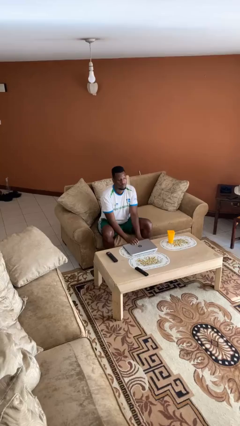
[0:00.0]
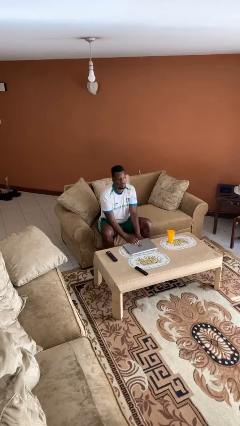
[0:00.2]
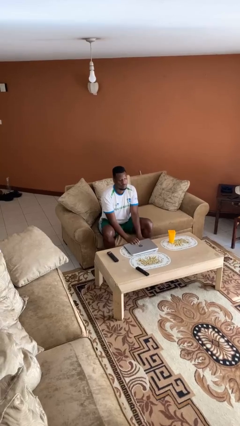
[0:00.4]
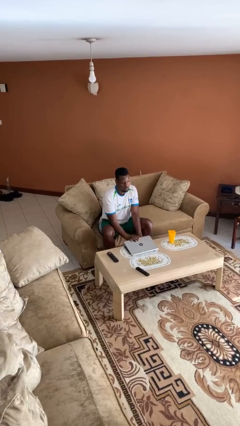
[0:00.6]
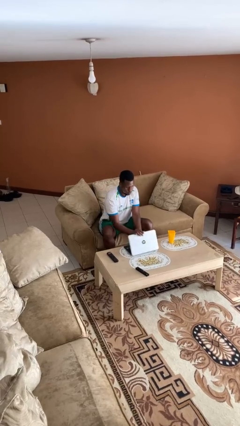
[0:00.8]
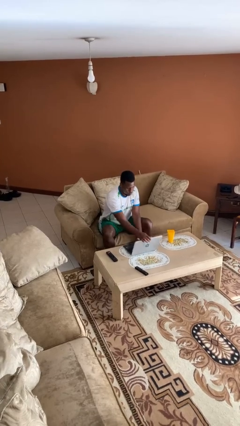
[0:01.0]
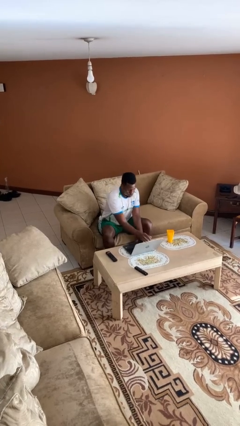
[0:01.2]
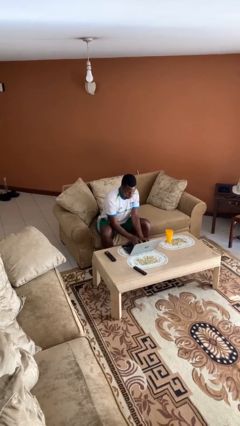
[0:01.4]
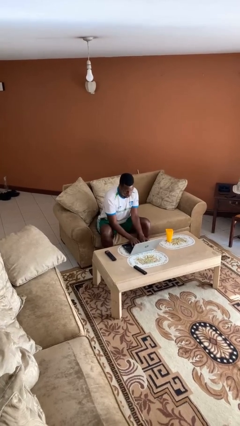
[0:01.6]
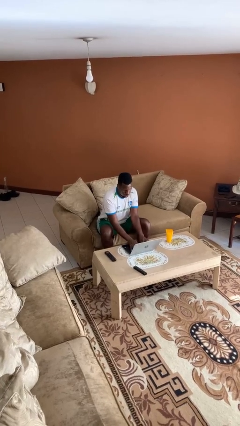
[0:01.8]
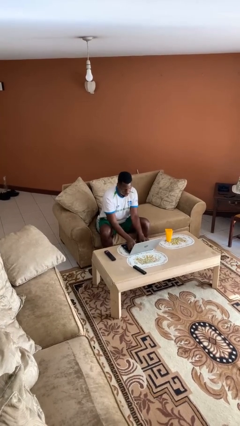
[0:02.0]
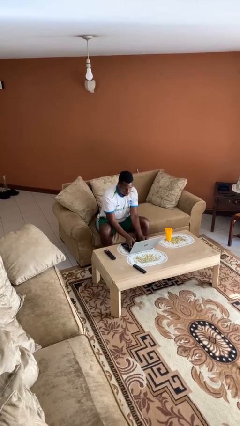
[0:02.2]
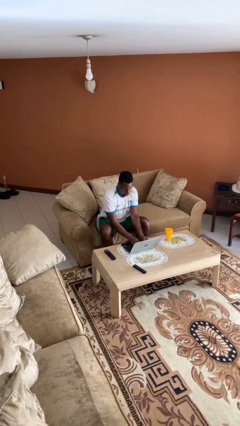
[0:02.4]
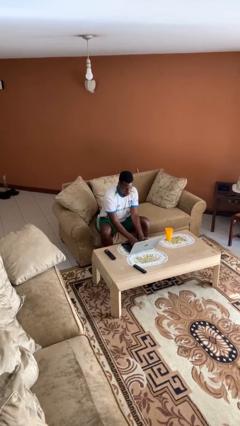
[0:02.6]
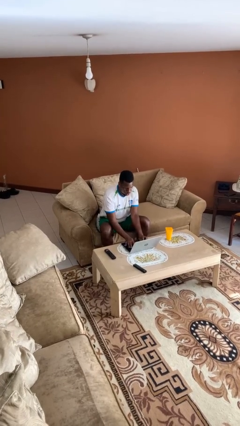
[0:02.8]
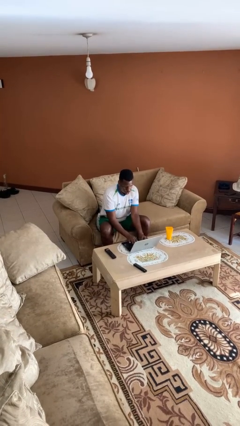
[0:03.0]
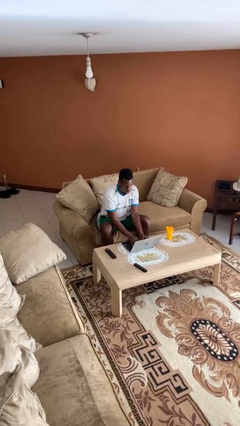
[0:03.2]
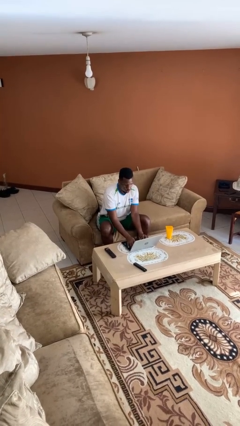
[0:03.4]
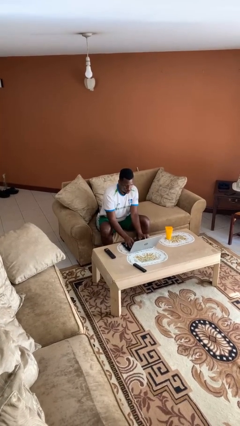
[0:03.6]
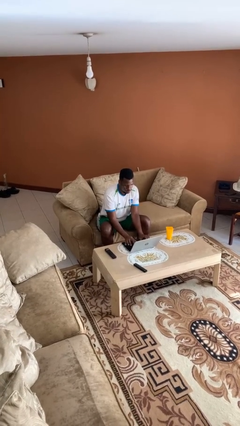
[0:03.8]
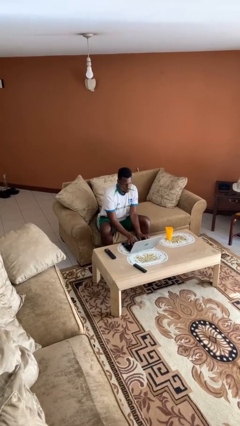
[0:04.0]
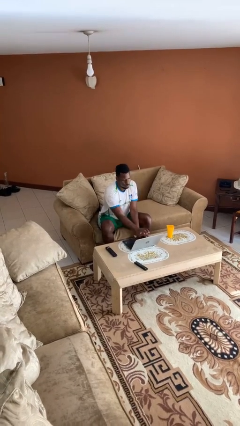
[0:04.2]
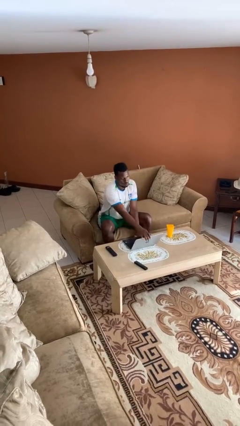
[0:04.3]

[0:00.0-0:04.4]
person interacts with laptop

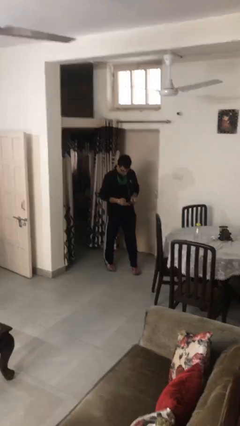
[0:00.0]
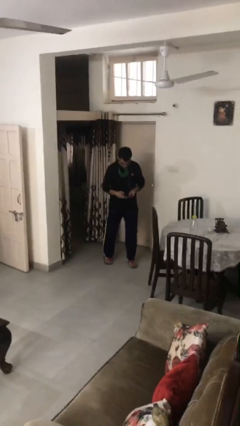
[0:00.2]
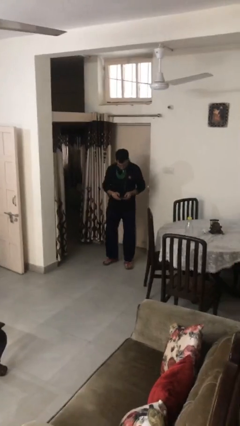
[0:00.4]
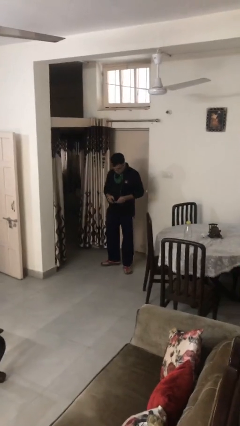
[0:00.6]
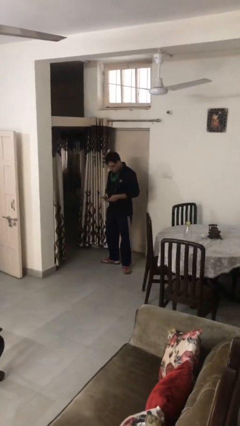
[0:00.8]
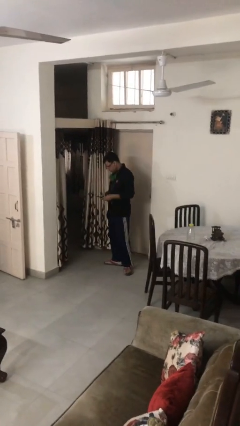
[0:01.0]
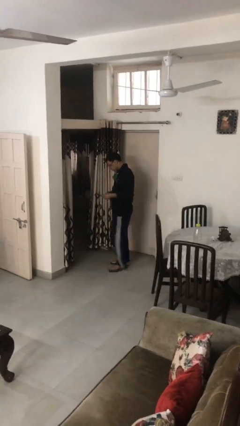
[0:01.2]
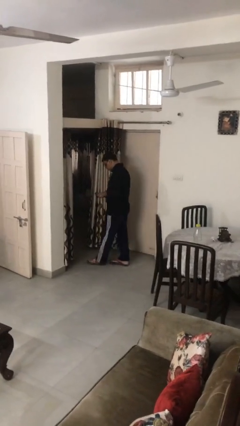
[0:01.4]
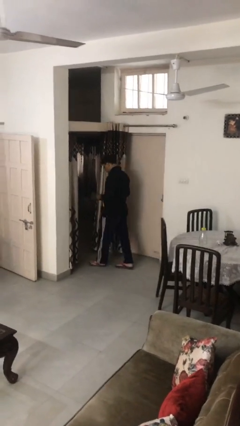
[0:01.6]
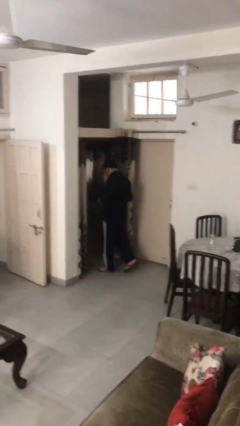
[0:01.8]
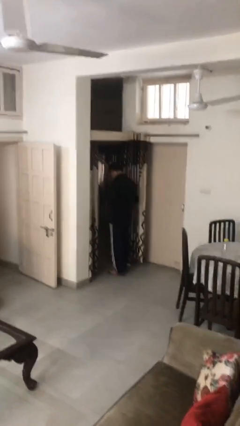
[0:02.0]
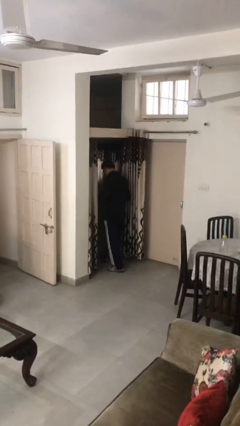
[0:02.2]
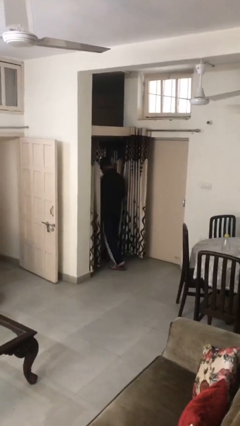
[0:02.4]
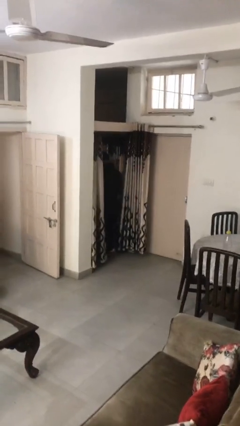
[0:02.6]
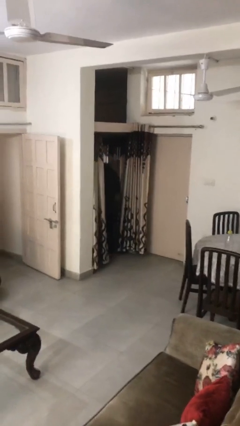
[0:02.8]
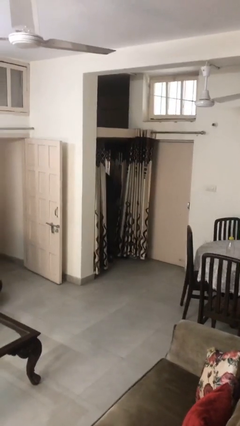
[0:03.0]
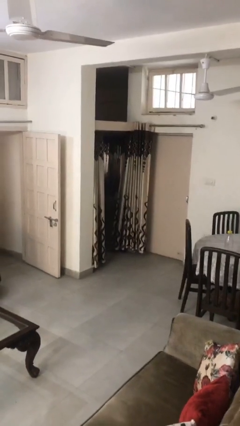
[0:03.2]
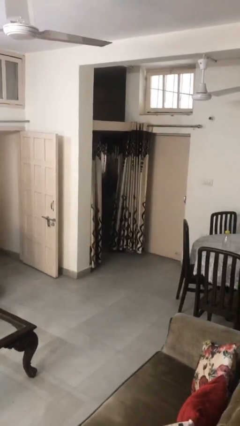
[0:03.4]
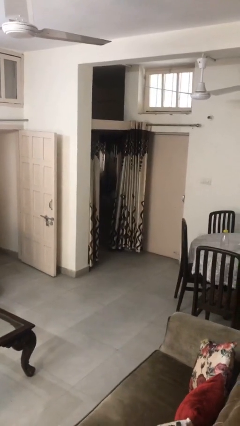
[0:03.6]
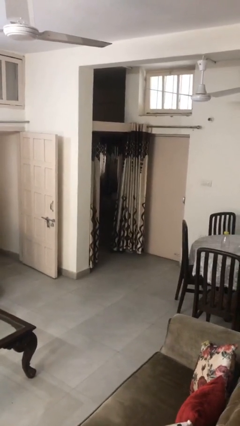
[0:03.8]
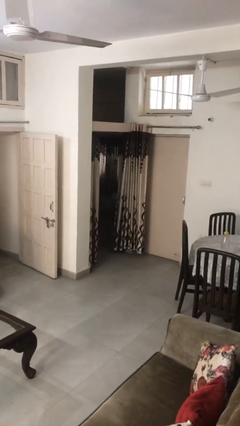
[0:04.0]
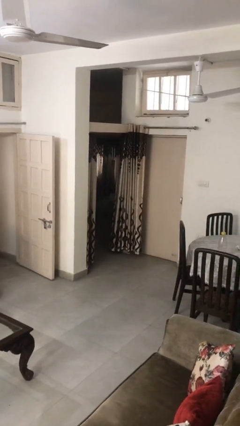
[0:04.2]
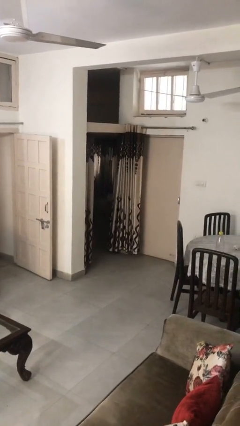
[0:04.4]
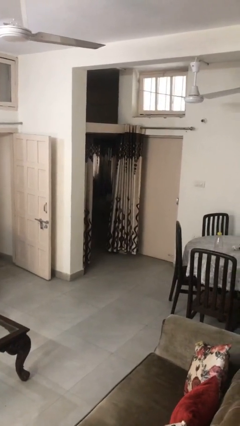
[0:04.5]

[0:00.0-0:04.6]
person exits scene through structure

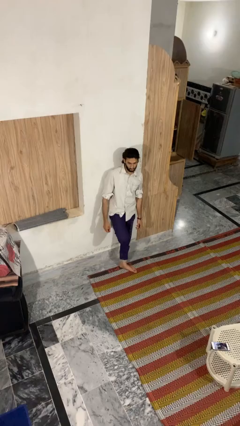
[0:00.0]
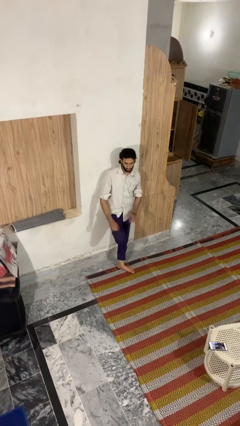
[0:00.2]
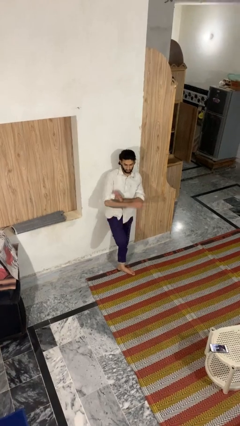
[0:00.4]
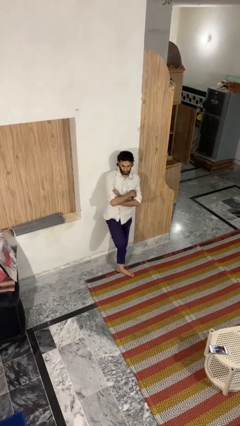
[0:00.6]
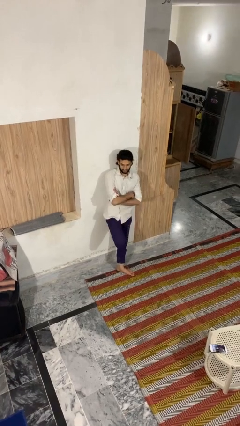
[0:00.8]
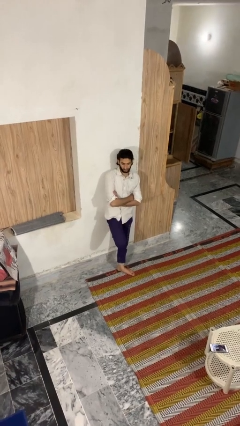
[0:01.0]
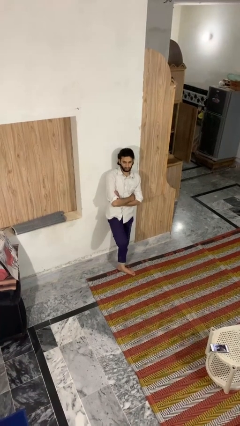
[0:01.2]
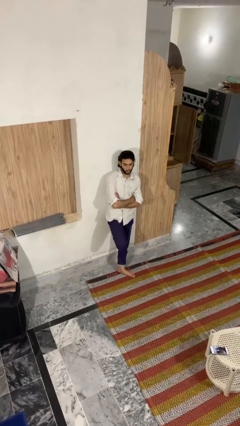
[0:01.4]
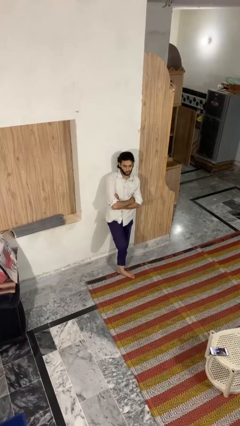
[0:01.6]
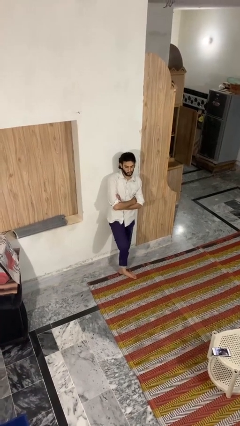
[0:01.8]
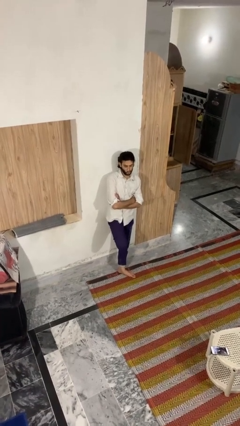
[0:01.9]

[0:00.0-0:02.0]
person crosses arms

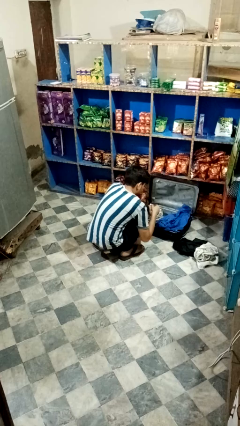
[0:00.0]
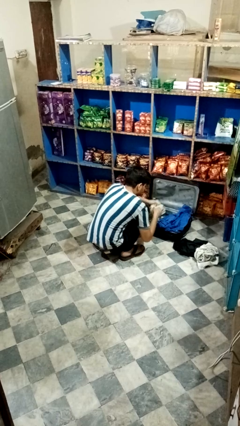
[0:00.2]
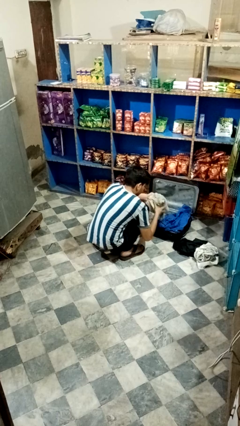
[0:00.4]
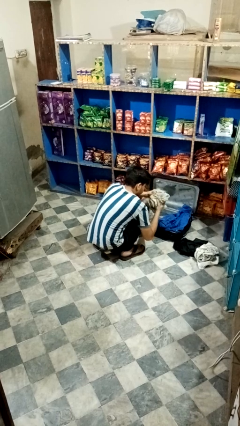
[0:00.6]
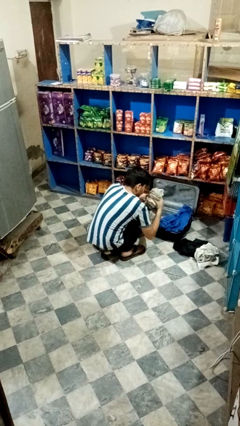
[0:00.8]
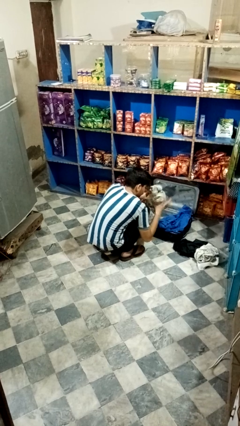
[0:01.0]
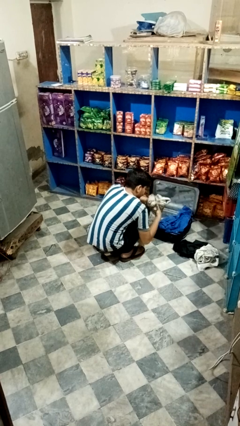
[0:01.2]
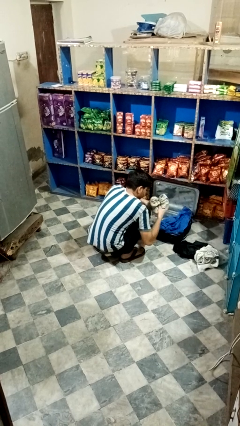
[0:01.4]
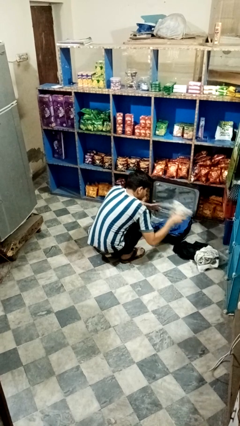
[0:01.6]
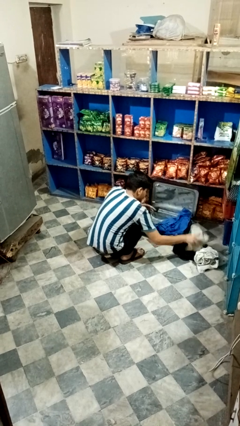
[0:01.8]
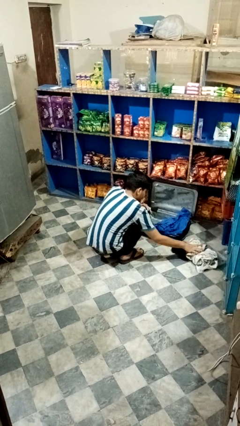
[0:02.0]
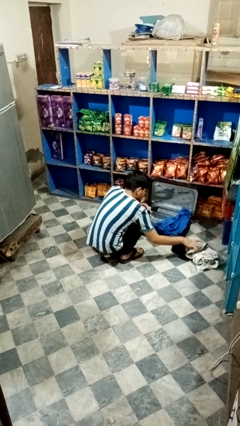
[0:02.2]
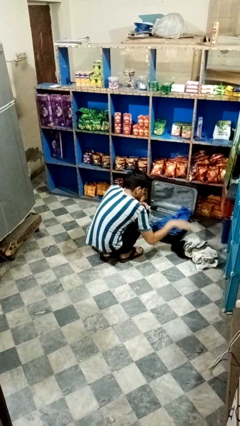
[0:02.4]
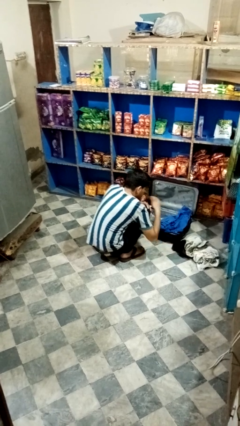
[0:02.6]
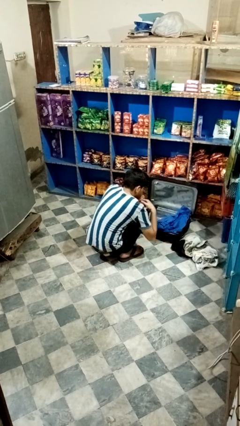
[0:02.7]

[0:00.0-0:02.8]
person unloads clothes from suitcase

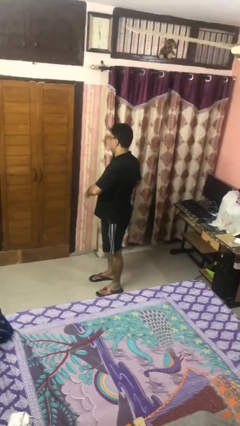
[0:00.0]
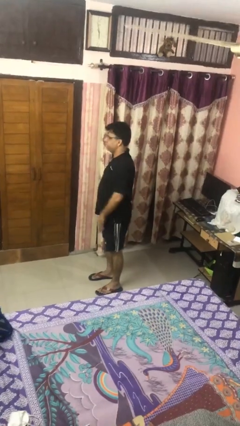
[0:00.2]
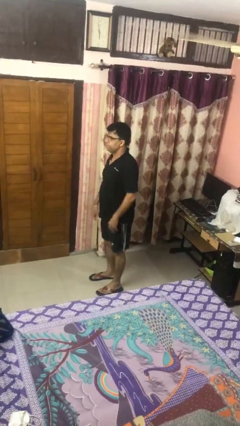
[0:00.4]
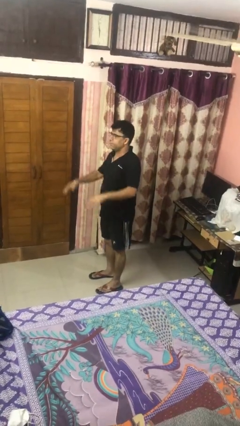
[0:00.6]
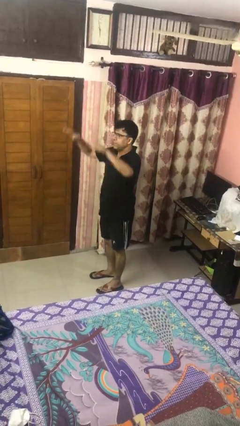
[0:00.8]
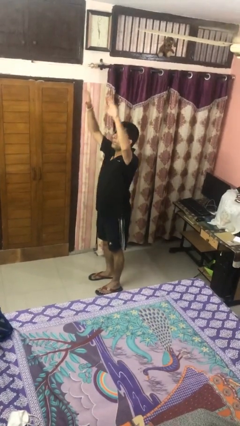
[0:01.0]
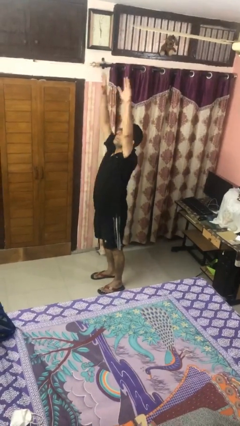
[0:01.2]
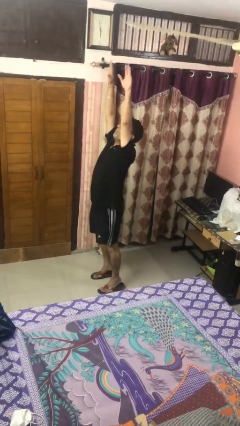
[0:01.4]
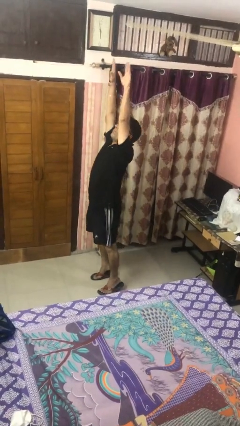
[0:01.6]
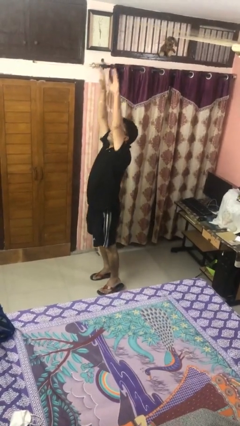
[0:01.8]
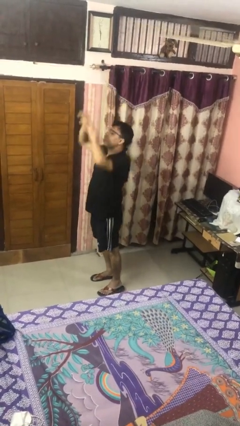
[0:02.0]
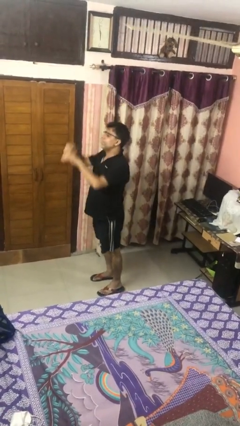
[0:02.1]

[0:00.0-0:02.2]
person stretches arms over head

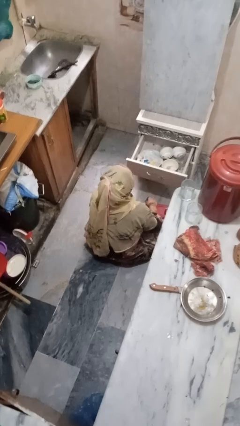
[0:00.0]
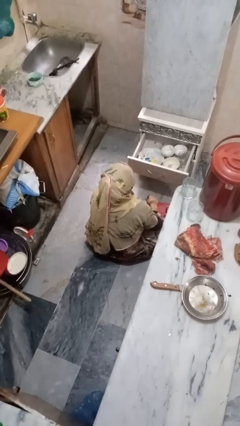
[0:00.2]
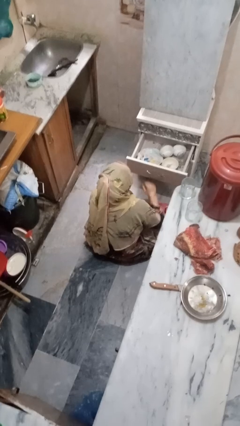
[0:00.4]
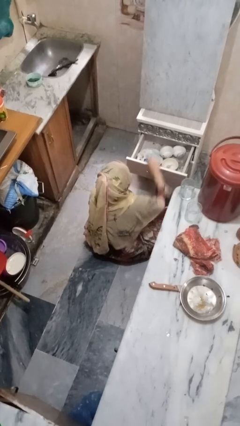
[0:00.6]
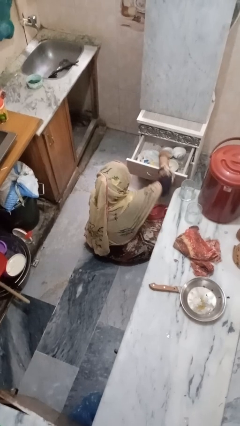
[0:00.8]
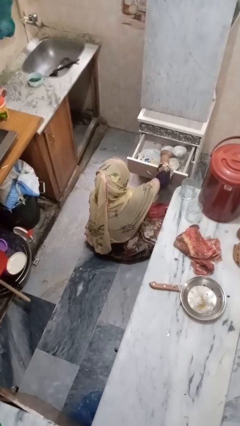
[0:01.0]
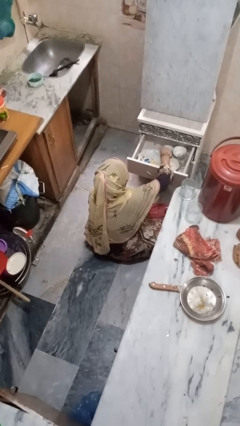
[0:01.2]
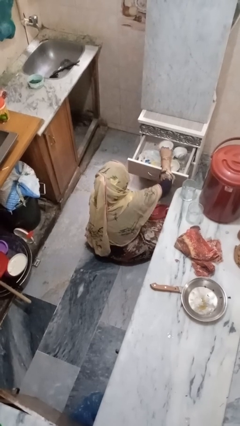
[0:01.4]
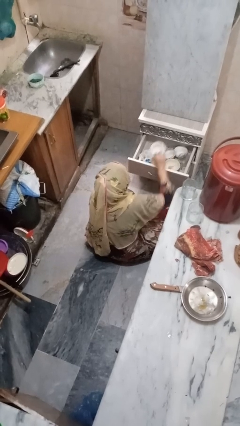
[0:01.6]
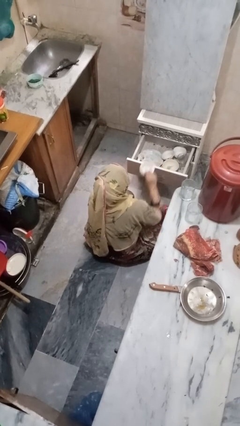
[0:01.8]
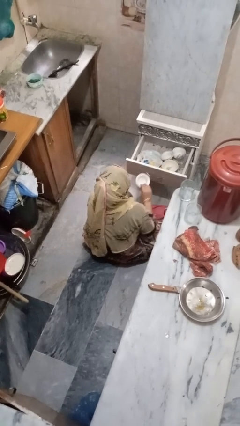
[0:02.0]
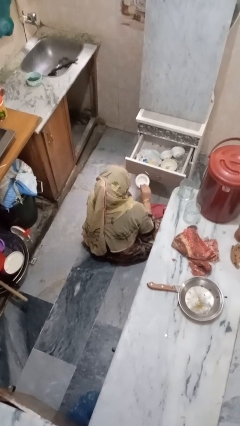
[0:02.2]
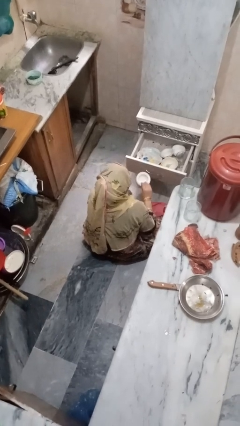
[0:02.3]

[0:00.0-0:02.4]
person takes object from kitchen drawer
